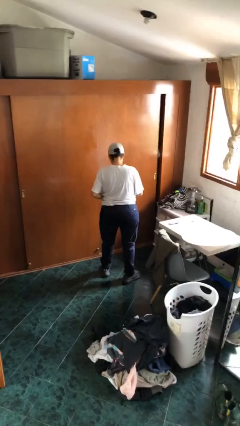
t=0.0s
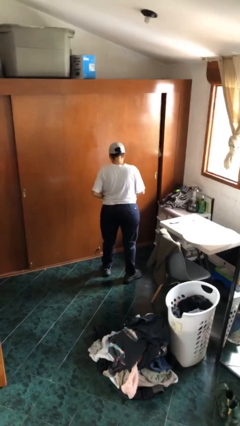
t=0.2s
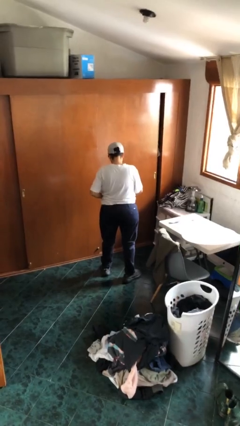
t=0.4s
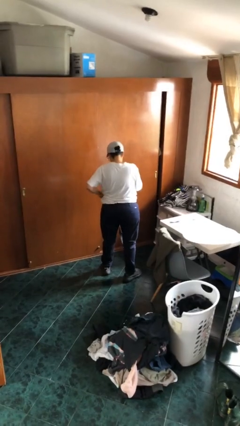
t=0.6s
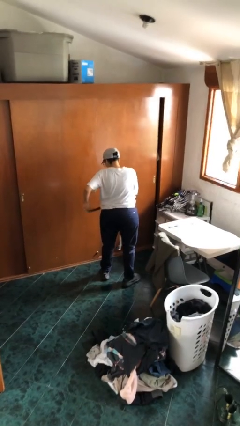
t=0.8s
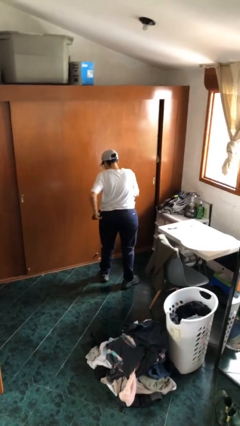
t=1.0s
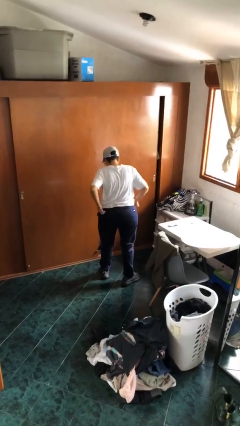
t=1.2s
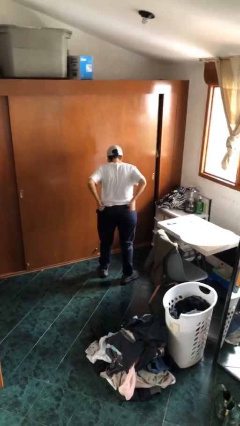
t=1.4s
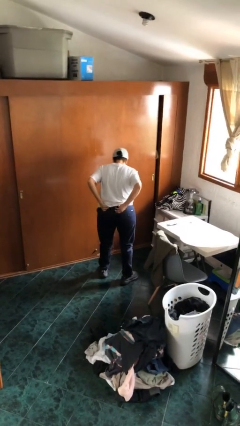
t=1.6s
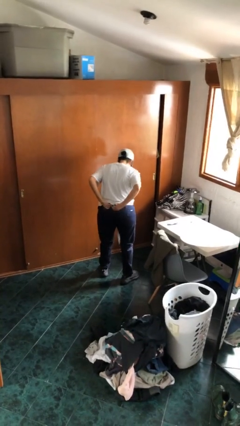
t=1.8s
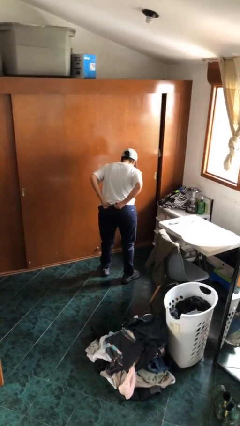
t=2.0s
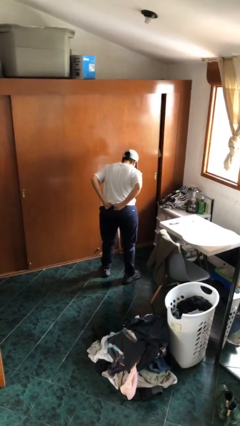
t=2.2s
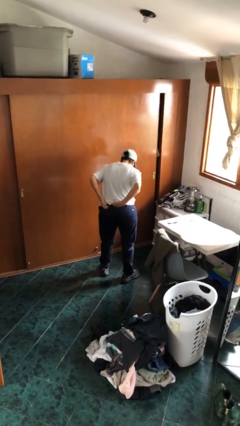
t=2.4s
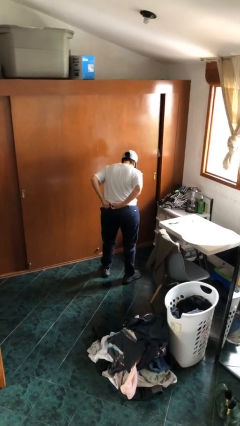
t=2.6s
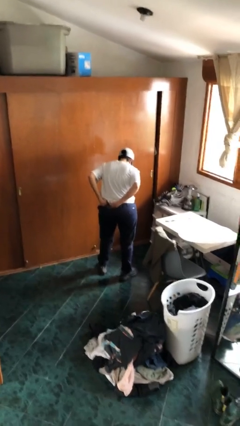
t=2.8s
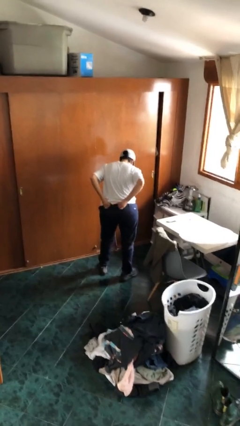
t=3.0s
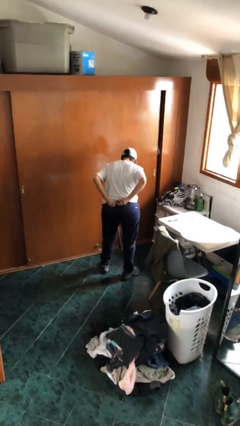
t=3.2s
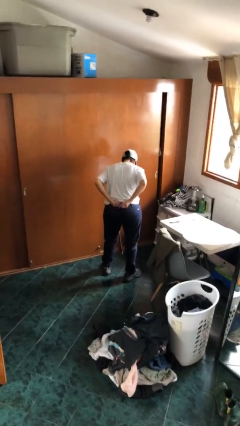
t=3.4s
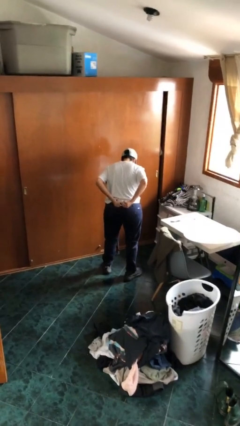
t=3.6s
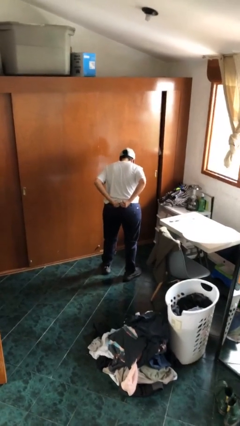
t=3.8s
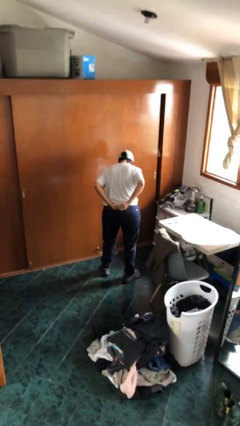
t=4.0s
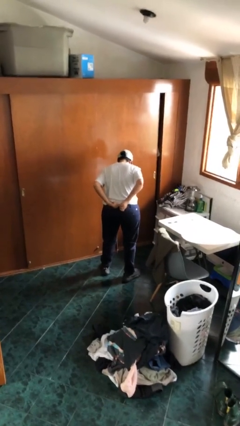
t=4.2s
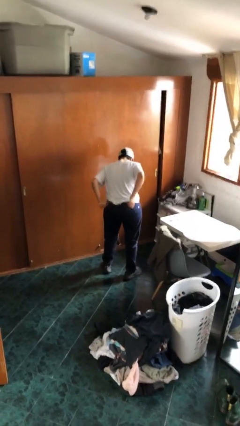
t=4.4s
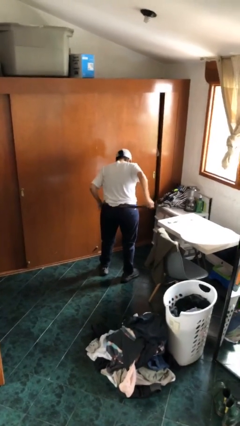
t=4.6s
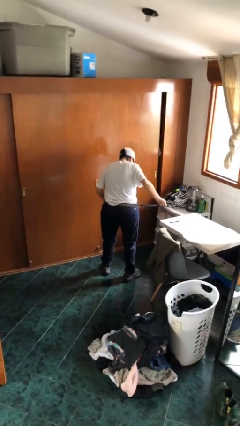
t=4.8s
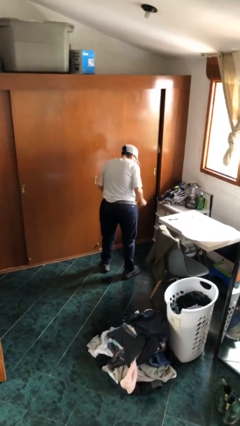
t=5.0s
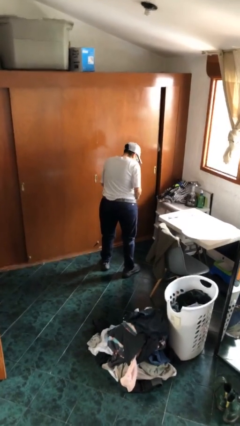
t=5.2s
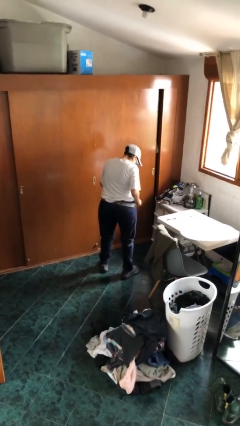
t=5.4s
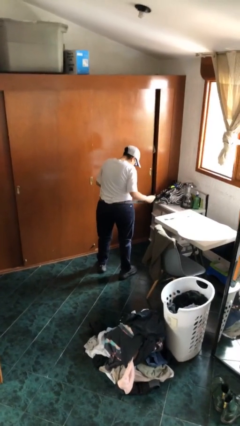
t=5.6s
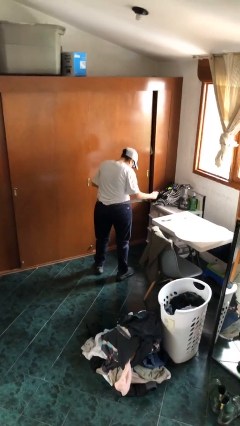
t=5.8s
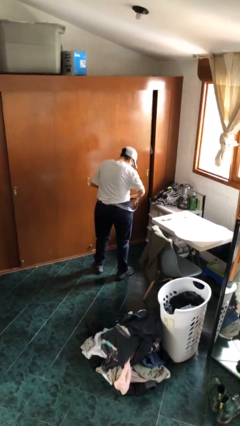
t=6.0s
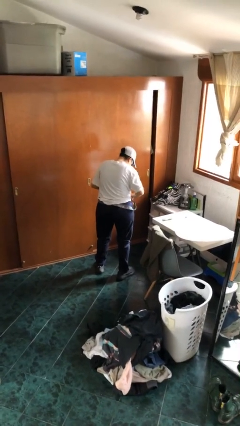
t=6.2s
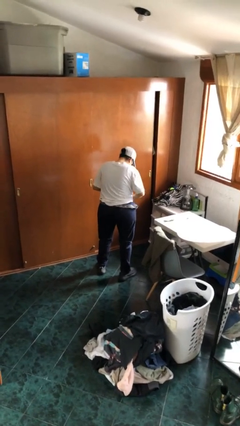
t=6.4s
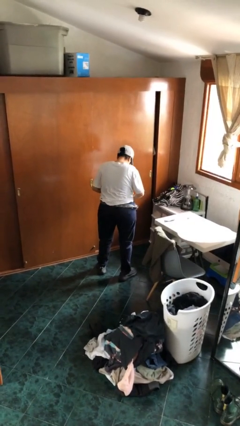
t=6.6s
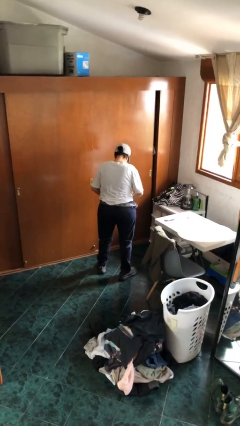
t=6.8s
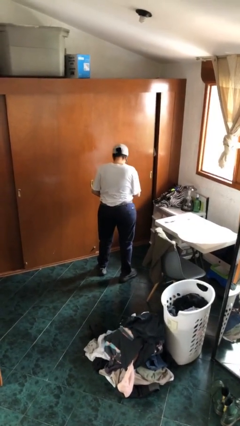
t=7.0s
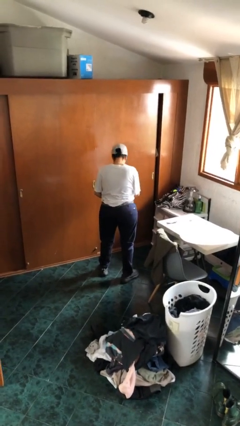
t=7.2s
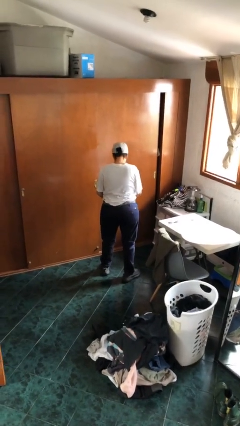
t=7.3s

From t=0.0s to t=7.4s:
person puts on belt

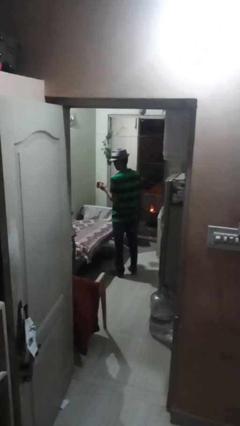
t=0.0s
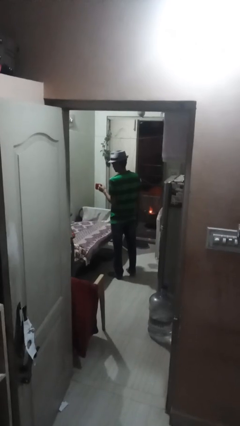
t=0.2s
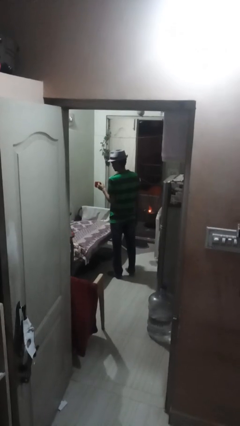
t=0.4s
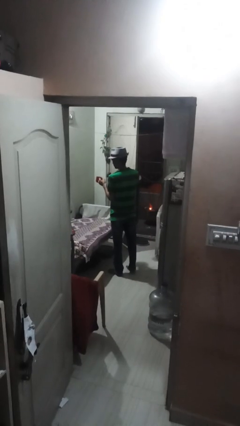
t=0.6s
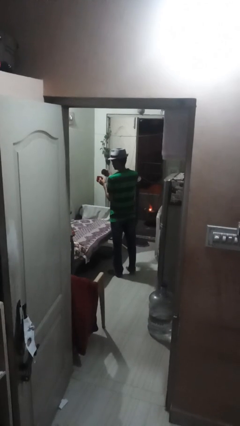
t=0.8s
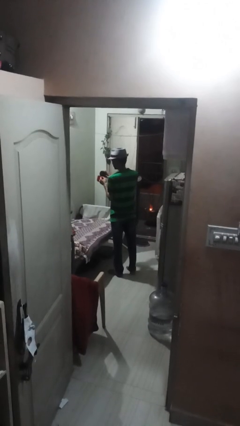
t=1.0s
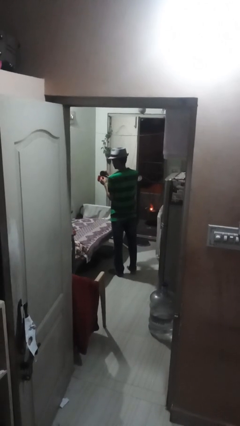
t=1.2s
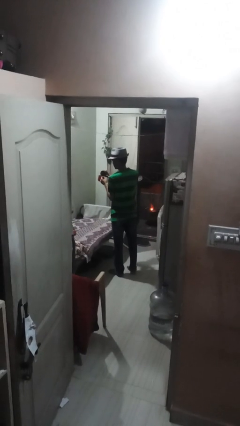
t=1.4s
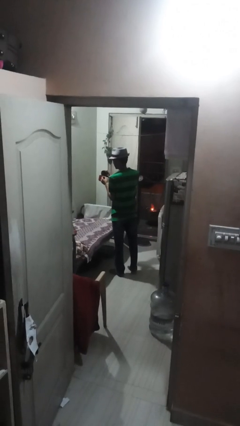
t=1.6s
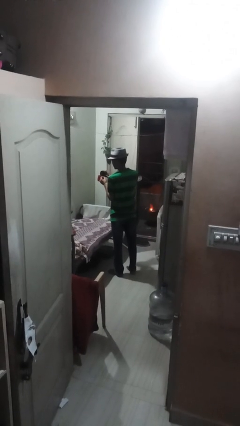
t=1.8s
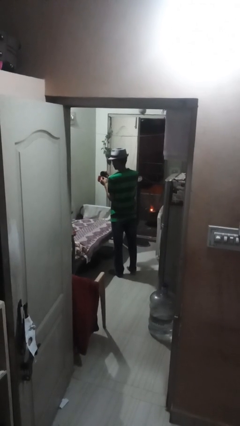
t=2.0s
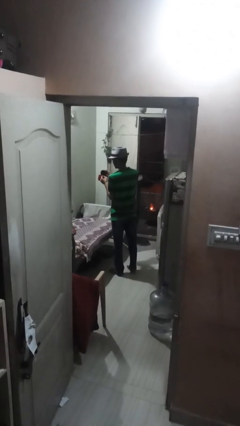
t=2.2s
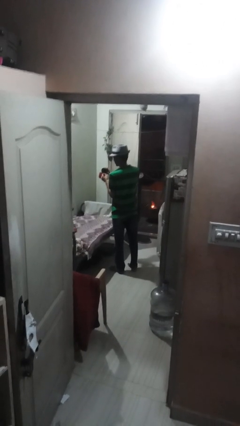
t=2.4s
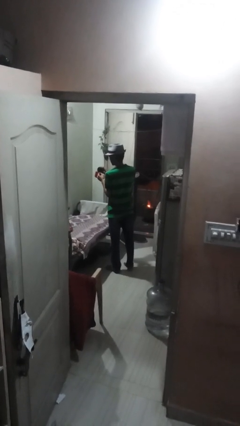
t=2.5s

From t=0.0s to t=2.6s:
person pours coffee into mug

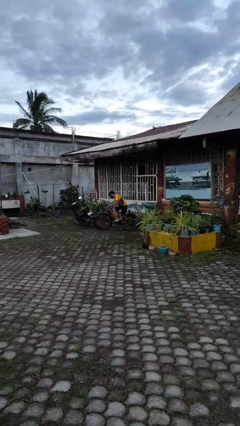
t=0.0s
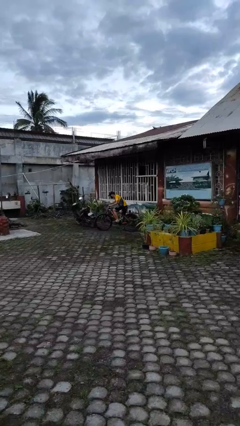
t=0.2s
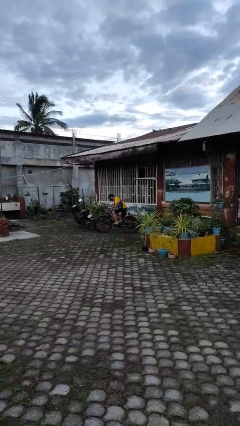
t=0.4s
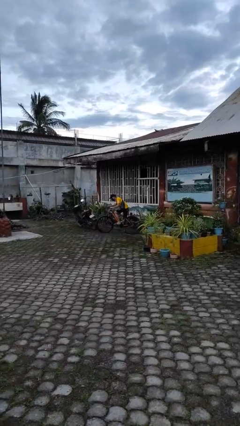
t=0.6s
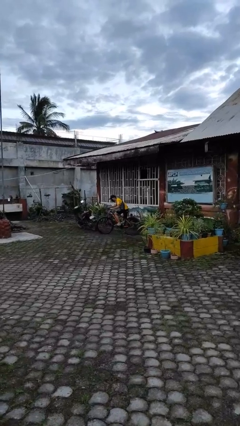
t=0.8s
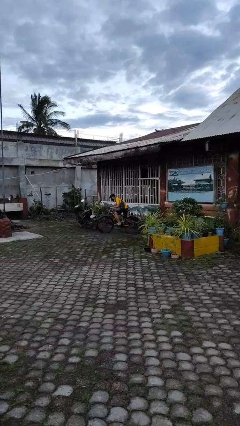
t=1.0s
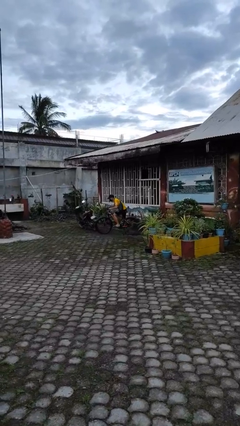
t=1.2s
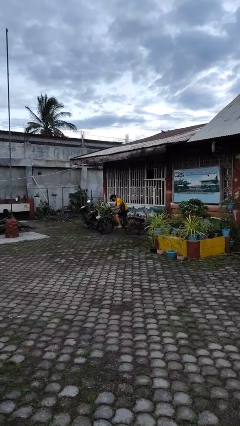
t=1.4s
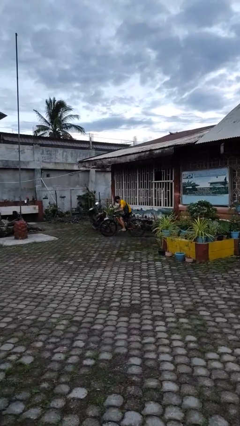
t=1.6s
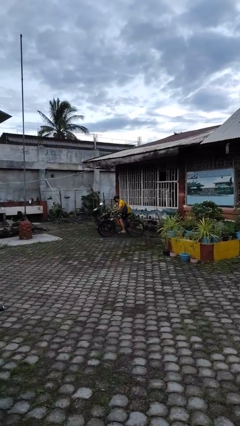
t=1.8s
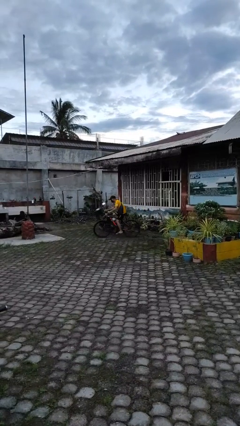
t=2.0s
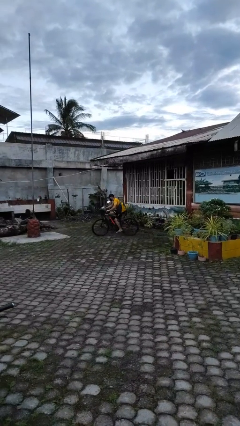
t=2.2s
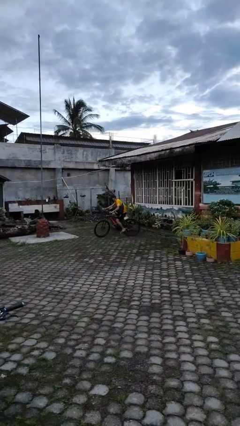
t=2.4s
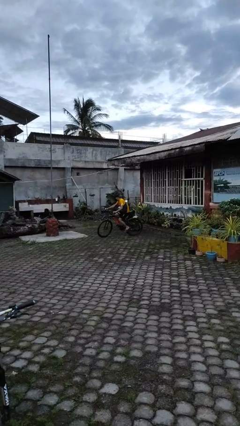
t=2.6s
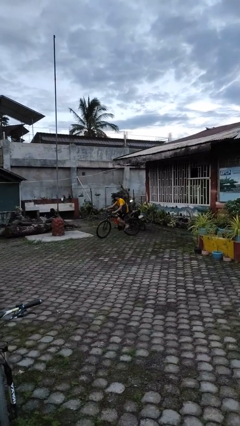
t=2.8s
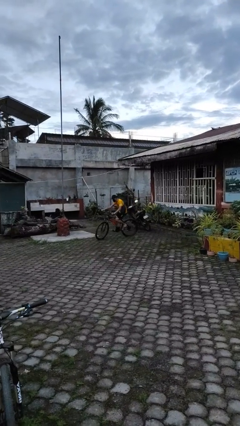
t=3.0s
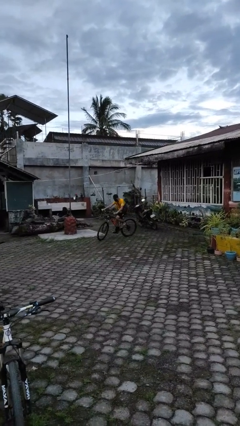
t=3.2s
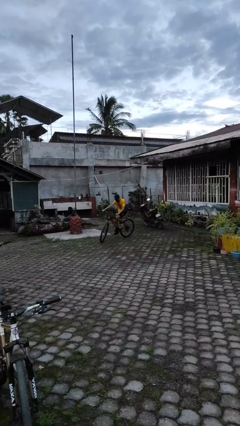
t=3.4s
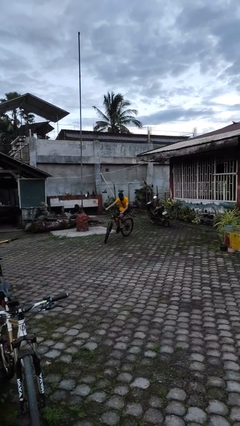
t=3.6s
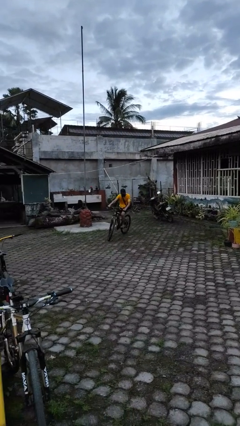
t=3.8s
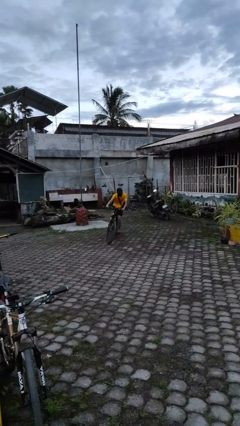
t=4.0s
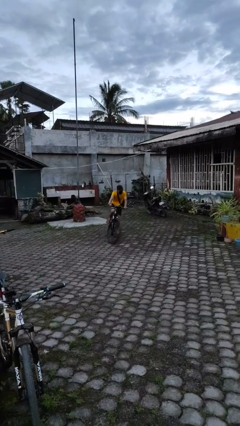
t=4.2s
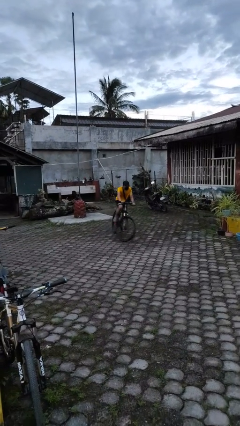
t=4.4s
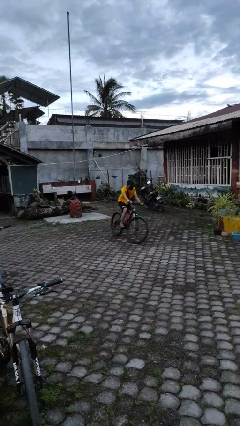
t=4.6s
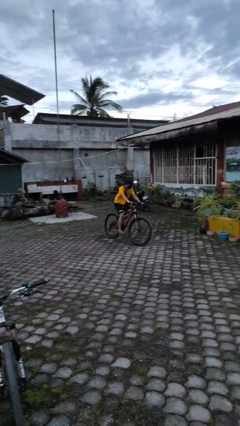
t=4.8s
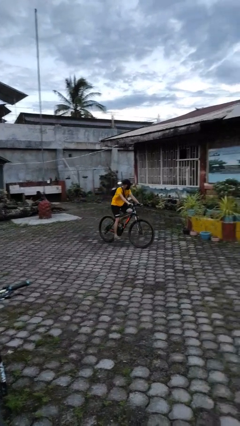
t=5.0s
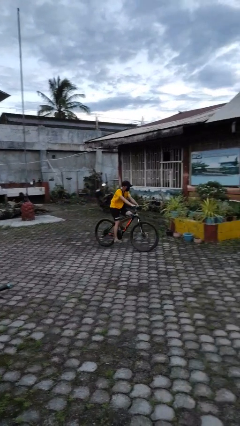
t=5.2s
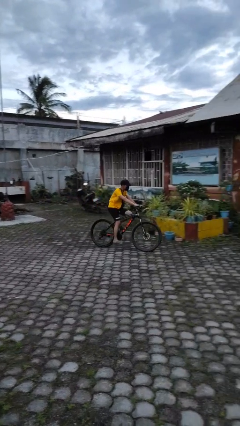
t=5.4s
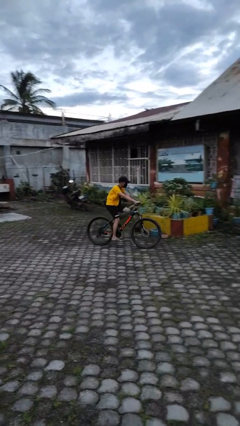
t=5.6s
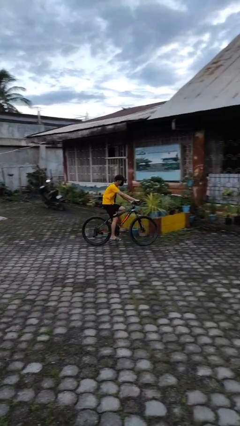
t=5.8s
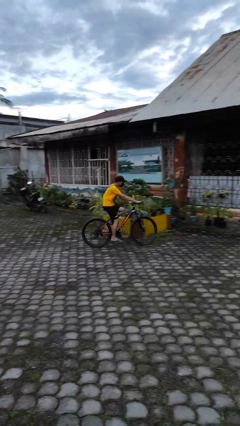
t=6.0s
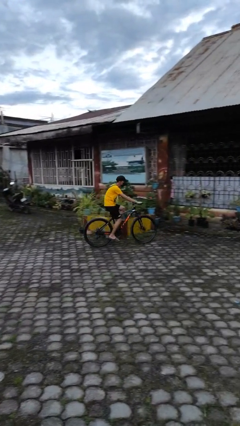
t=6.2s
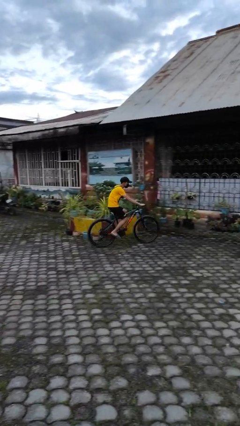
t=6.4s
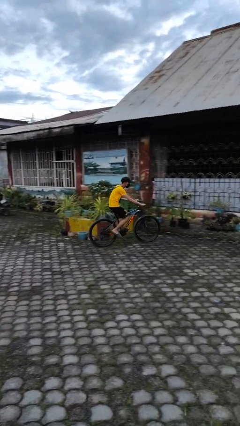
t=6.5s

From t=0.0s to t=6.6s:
person rides bicycle

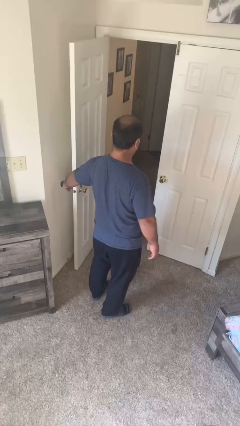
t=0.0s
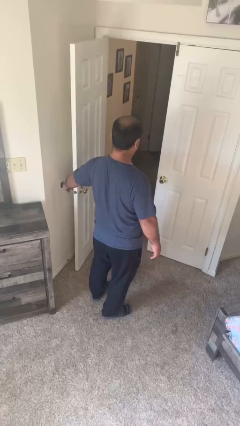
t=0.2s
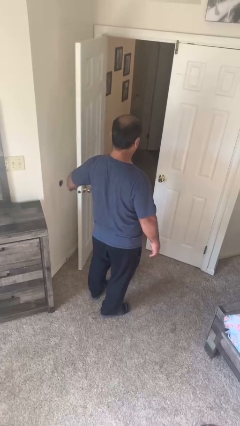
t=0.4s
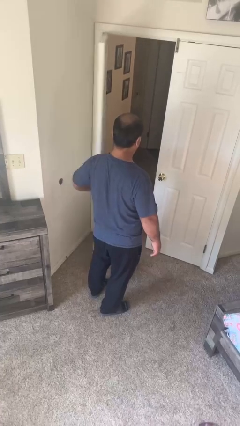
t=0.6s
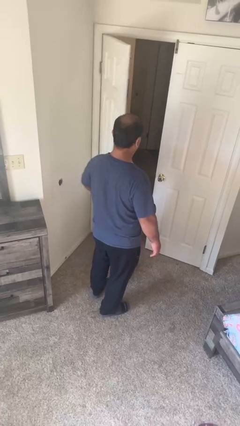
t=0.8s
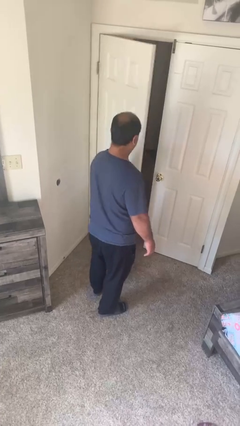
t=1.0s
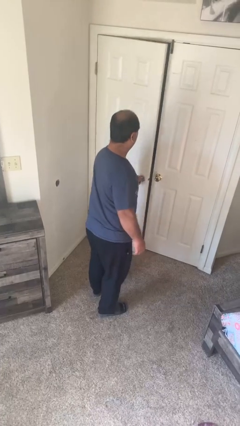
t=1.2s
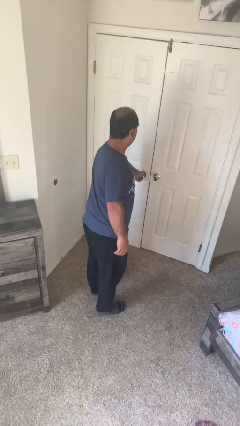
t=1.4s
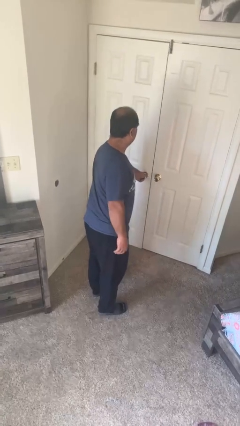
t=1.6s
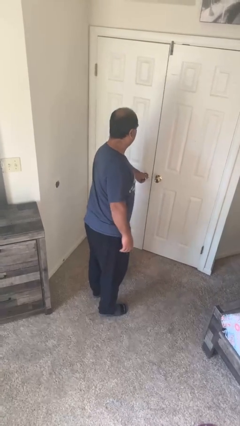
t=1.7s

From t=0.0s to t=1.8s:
person closes facility door
